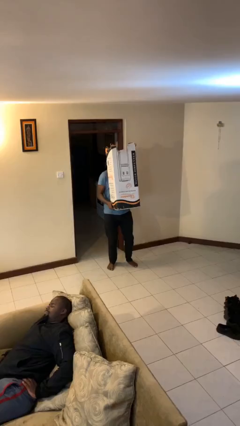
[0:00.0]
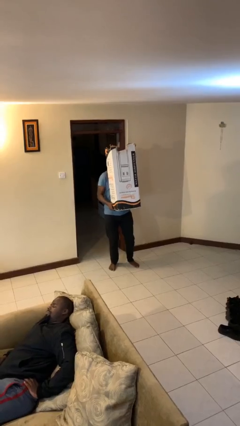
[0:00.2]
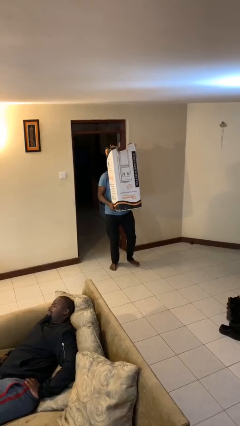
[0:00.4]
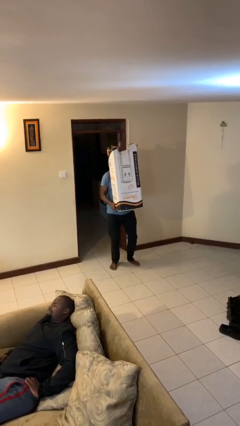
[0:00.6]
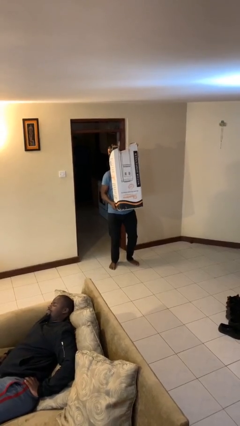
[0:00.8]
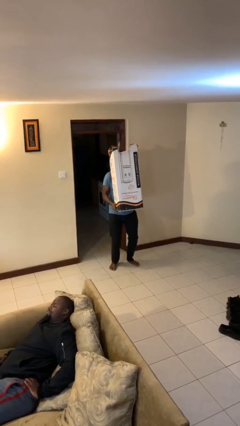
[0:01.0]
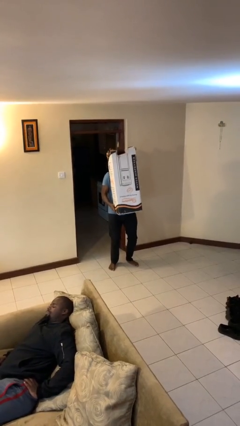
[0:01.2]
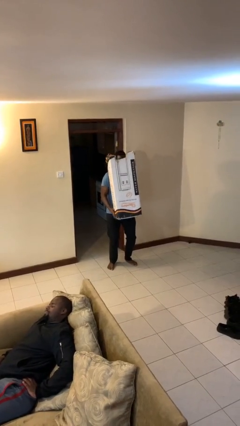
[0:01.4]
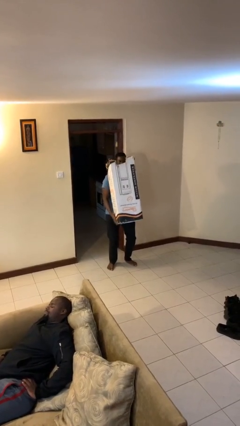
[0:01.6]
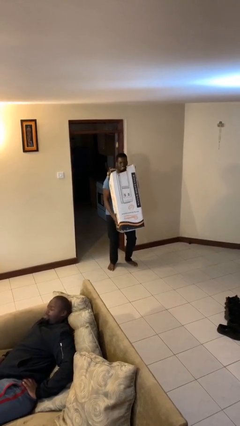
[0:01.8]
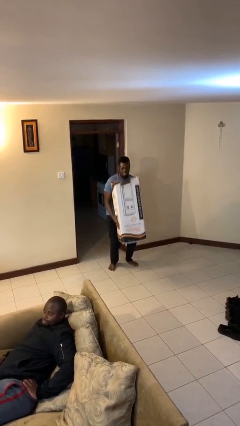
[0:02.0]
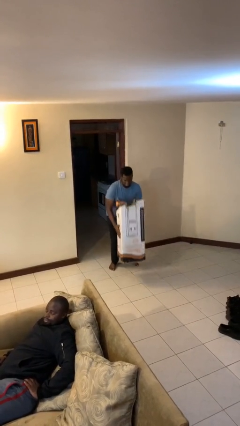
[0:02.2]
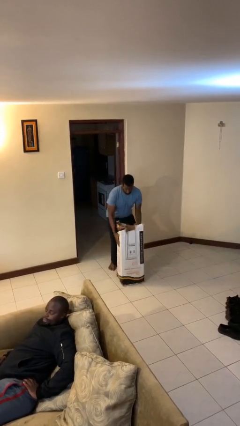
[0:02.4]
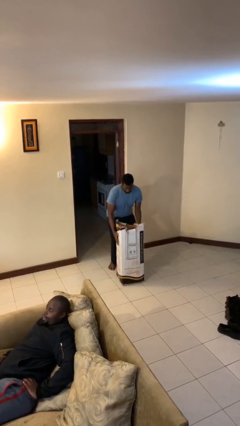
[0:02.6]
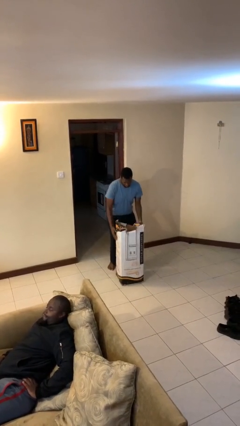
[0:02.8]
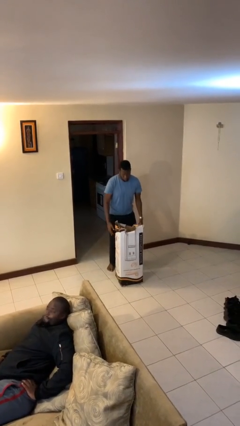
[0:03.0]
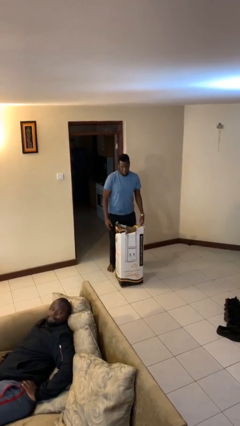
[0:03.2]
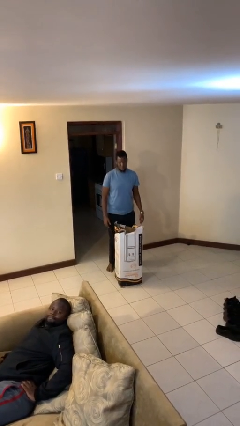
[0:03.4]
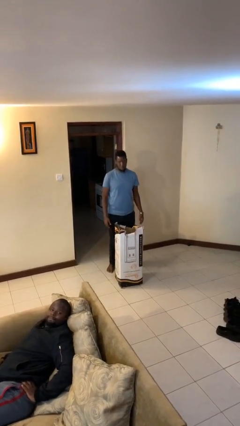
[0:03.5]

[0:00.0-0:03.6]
person puts down object on floor

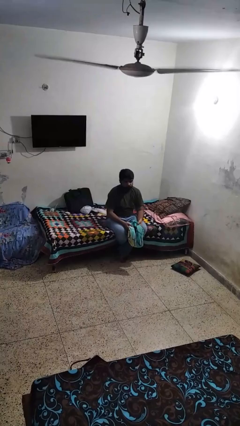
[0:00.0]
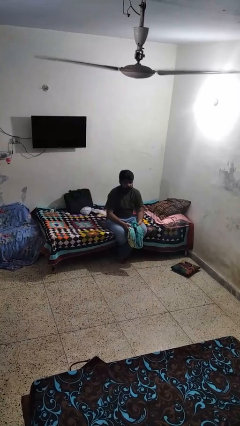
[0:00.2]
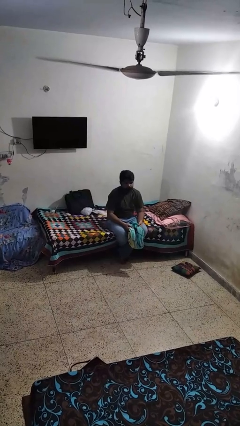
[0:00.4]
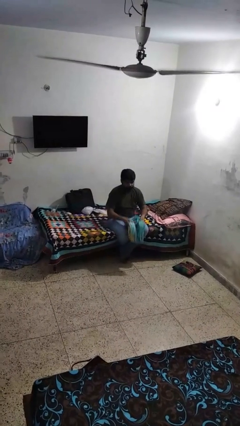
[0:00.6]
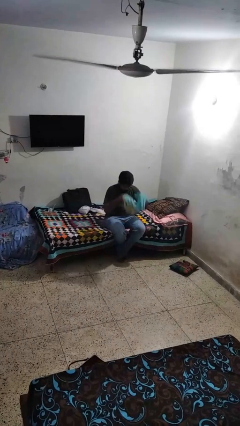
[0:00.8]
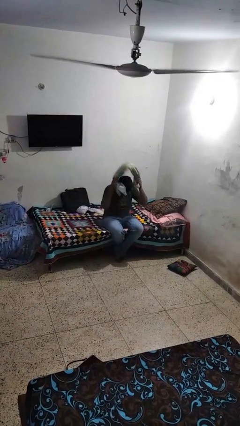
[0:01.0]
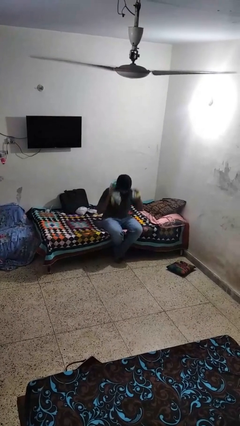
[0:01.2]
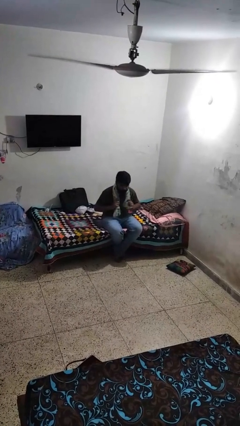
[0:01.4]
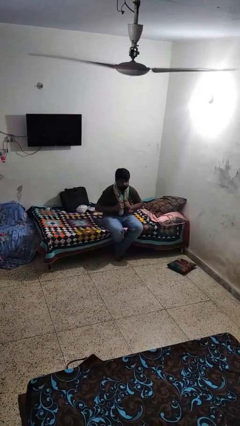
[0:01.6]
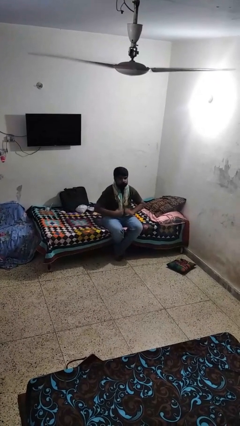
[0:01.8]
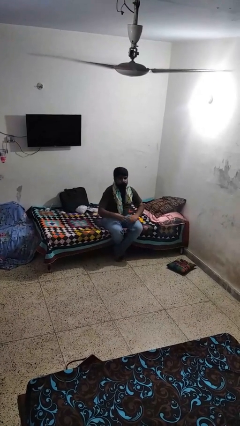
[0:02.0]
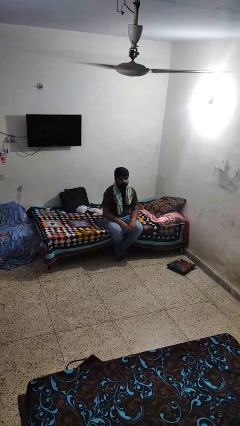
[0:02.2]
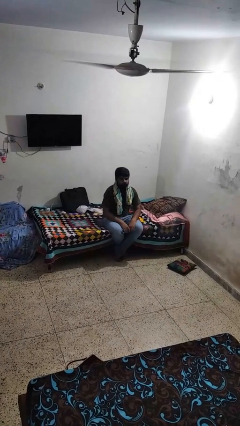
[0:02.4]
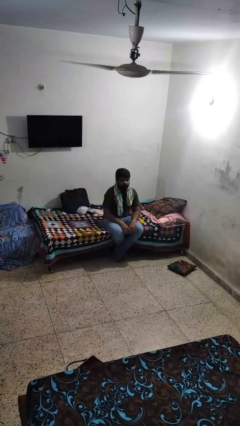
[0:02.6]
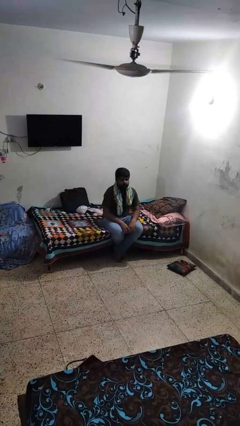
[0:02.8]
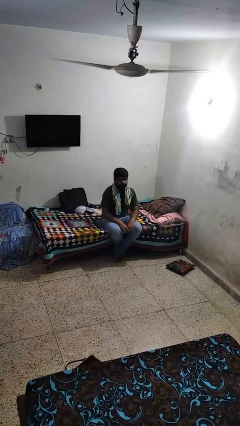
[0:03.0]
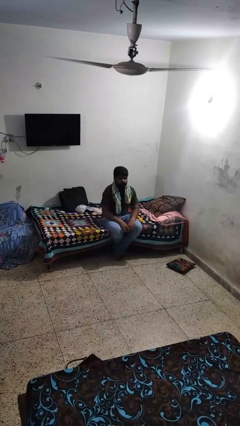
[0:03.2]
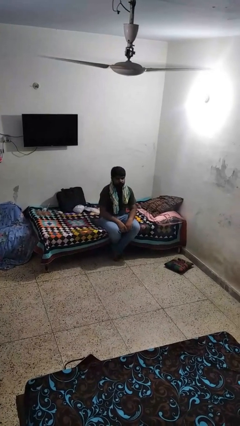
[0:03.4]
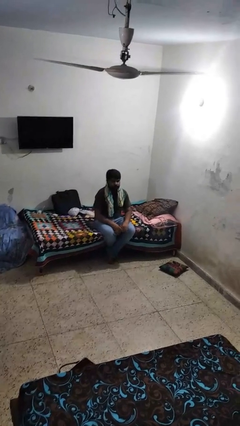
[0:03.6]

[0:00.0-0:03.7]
person puts on scarf

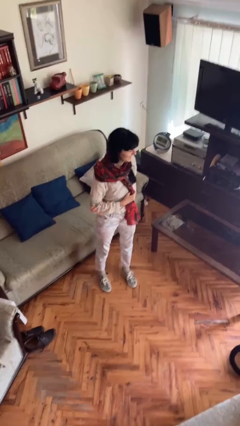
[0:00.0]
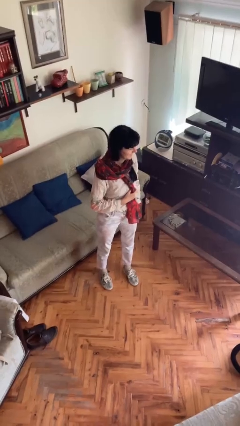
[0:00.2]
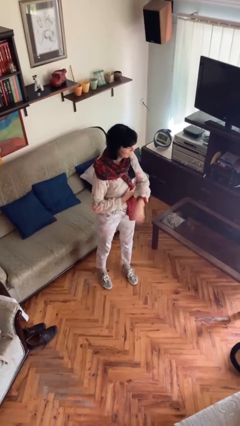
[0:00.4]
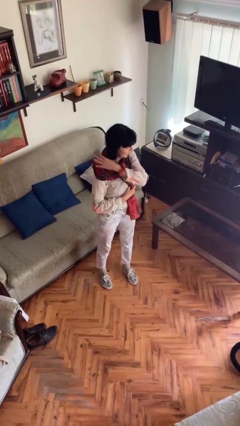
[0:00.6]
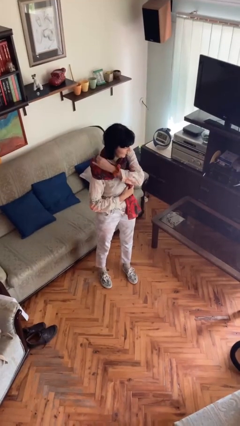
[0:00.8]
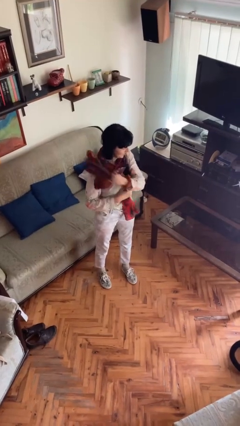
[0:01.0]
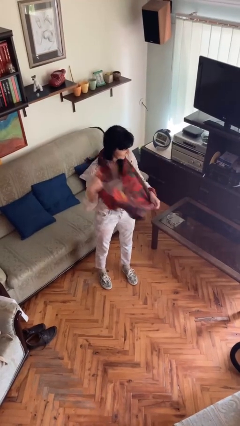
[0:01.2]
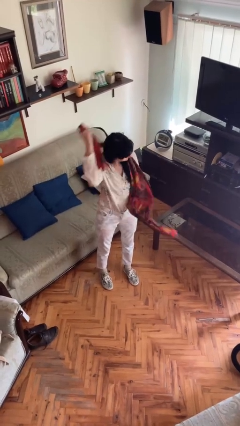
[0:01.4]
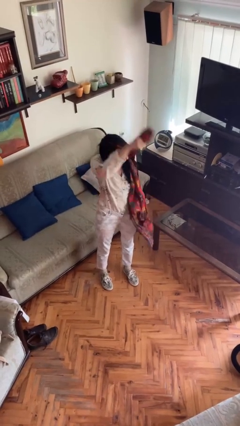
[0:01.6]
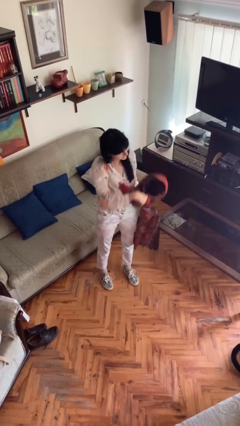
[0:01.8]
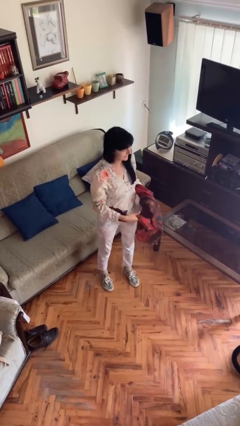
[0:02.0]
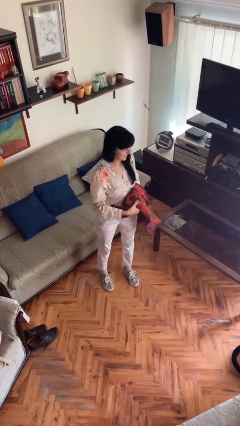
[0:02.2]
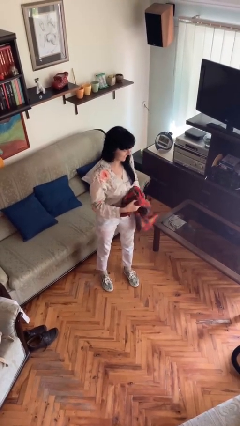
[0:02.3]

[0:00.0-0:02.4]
person takes off scarf

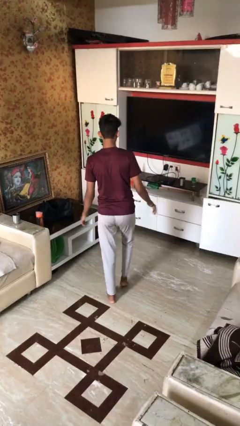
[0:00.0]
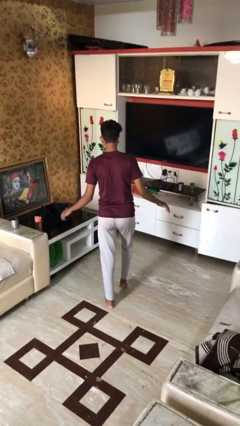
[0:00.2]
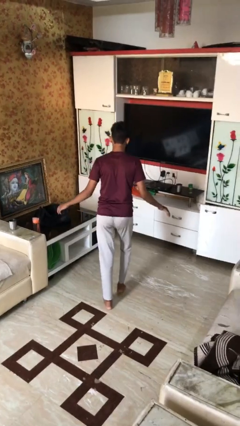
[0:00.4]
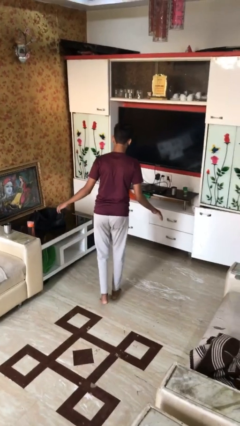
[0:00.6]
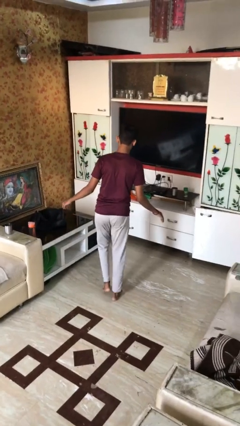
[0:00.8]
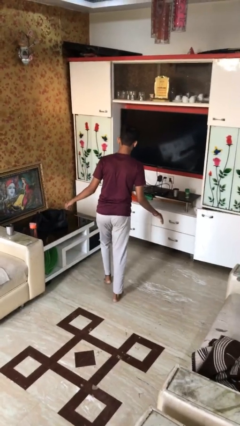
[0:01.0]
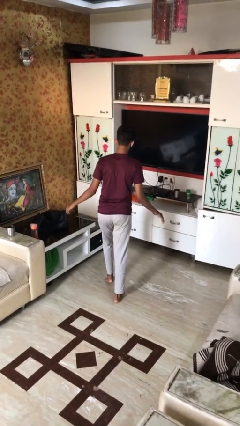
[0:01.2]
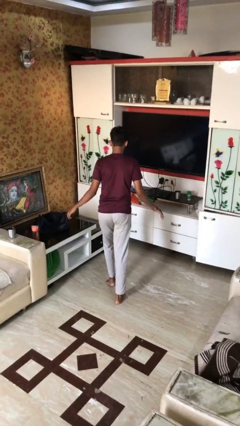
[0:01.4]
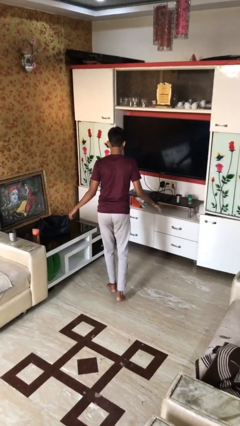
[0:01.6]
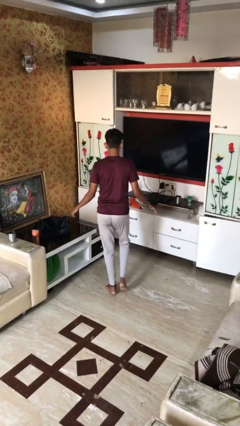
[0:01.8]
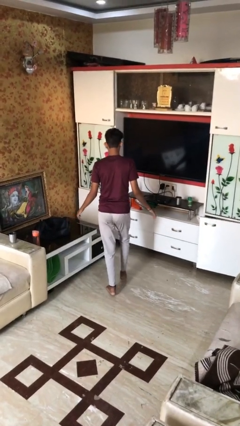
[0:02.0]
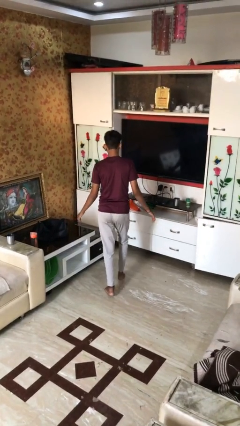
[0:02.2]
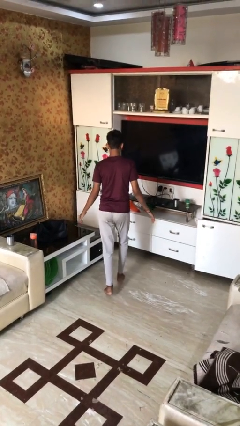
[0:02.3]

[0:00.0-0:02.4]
person walks tiptoe

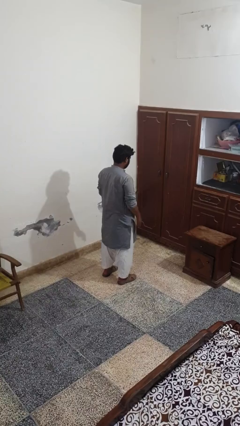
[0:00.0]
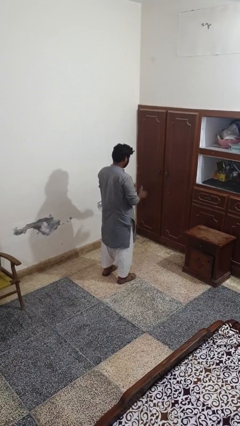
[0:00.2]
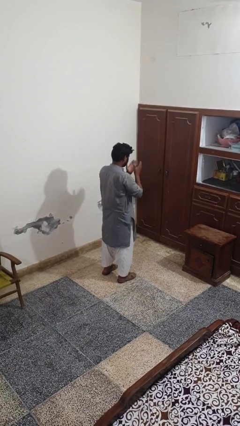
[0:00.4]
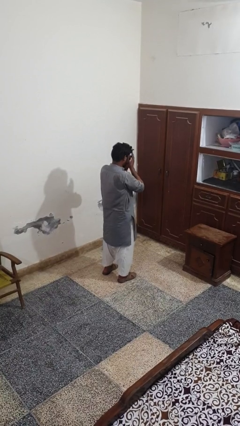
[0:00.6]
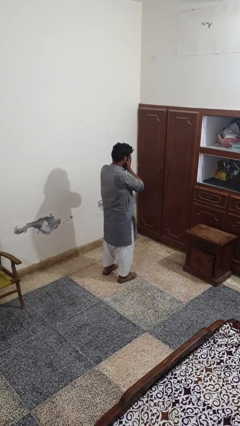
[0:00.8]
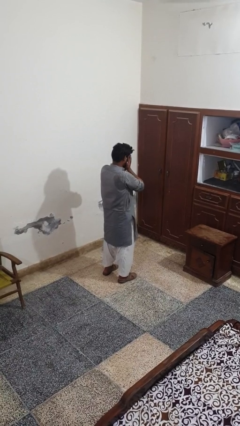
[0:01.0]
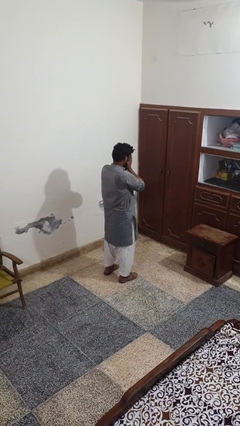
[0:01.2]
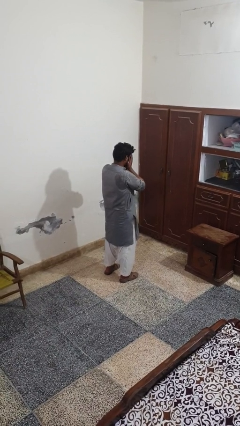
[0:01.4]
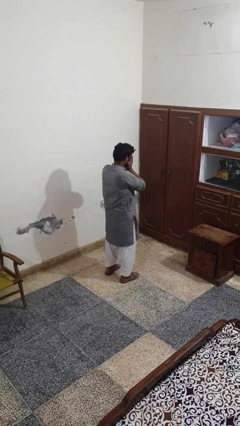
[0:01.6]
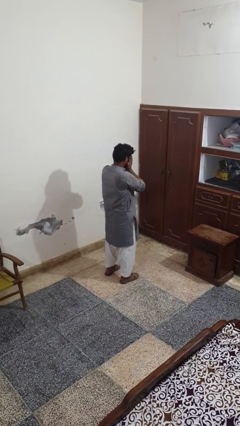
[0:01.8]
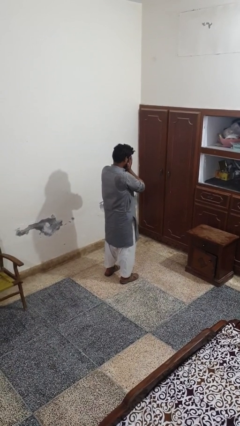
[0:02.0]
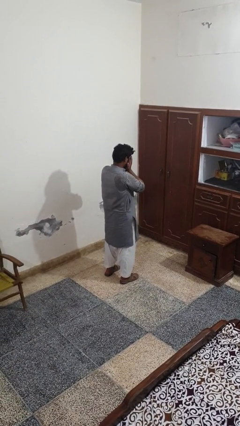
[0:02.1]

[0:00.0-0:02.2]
person covers face with hands

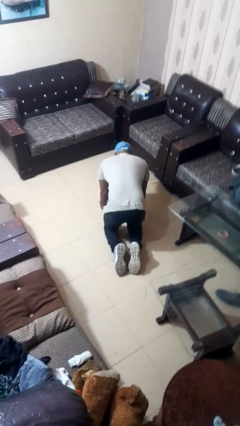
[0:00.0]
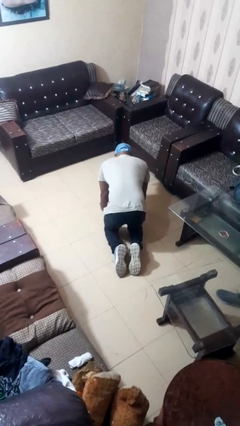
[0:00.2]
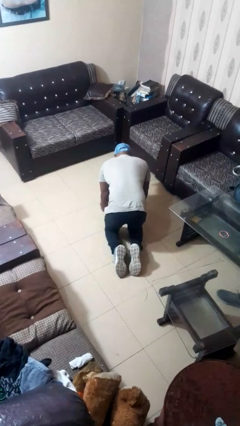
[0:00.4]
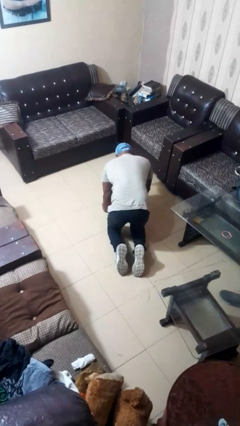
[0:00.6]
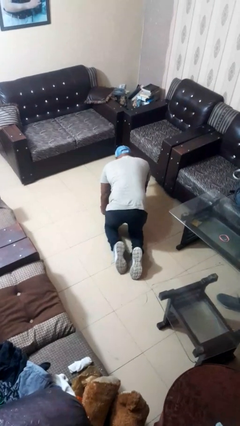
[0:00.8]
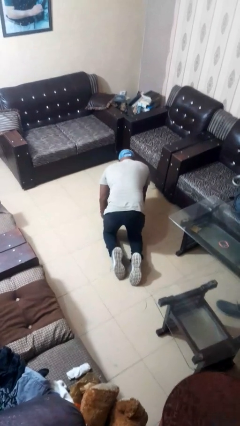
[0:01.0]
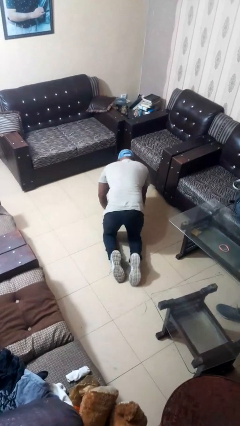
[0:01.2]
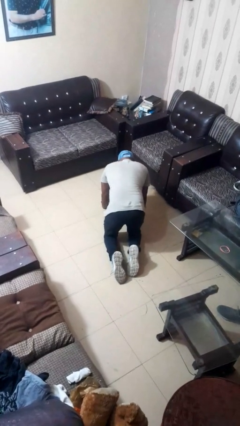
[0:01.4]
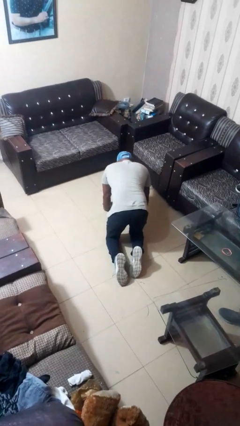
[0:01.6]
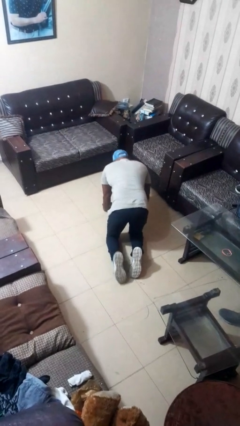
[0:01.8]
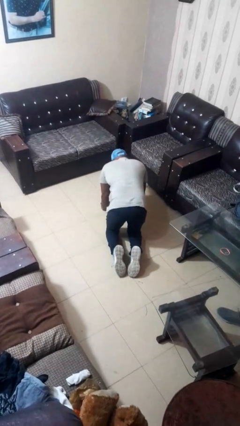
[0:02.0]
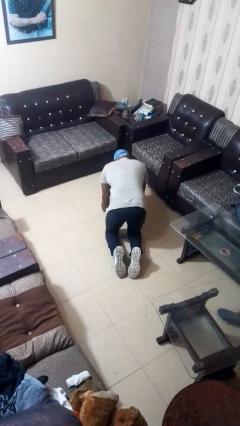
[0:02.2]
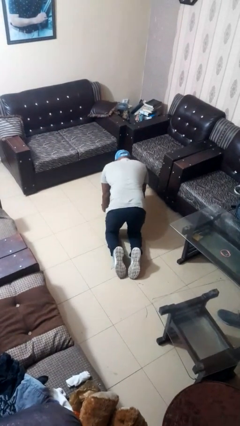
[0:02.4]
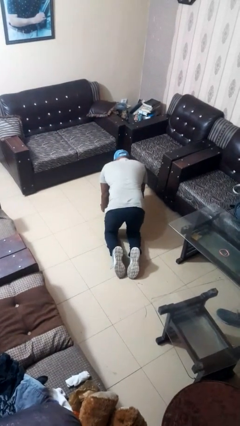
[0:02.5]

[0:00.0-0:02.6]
person crawls

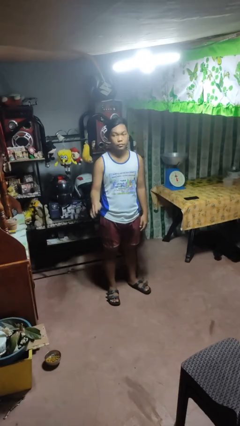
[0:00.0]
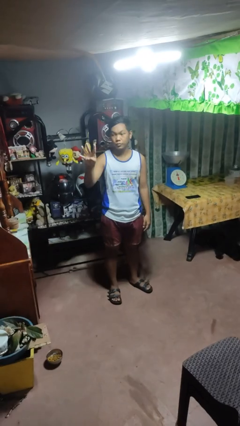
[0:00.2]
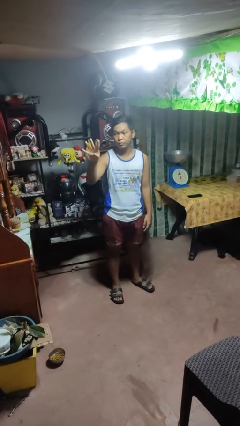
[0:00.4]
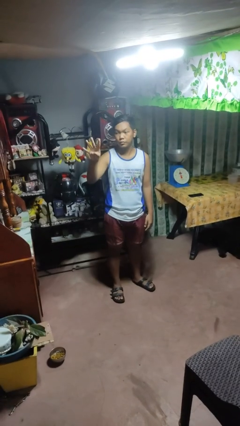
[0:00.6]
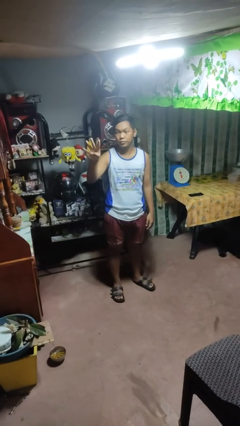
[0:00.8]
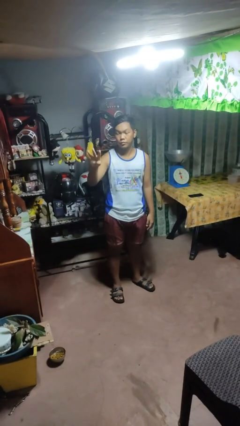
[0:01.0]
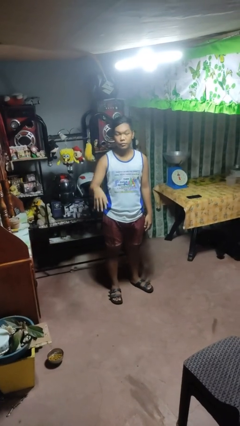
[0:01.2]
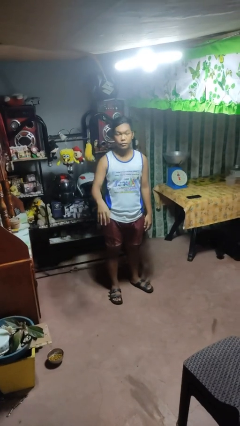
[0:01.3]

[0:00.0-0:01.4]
person gestures number four
